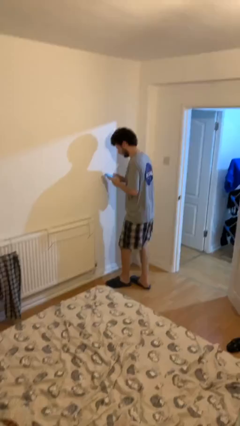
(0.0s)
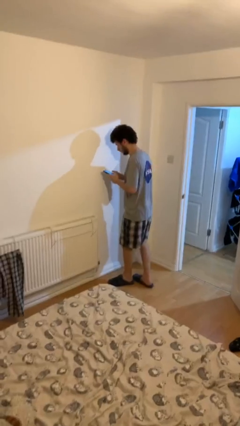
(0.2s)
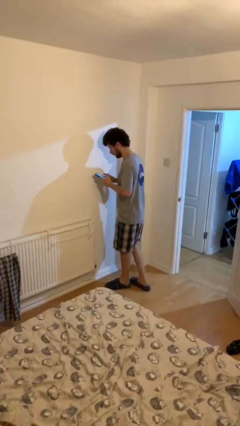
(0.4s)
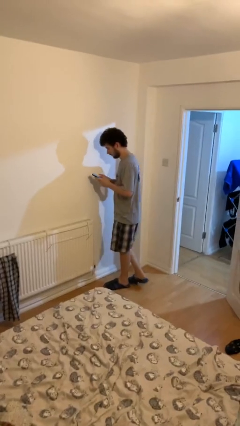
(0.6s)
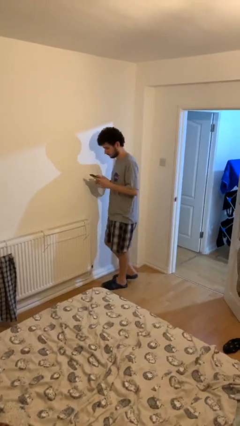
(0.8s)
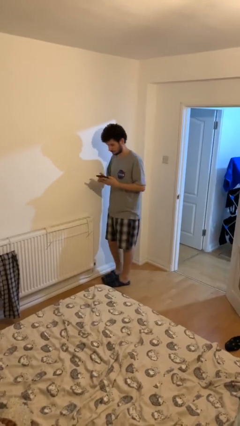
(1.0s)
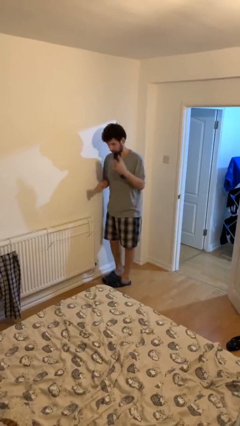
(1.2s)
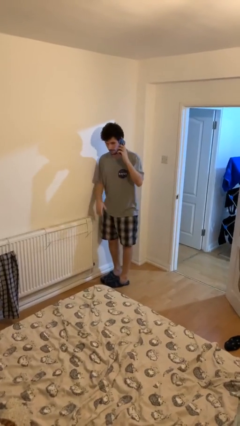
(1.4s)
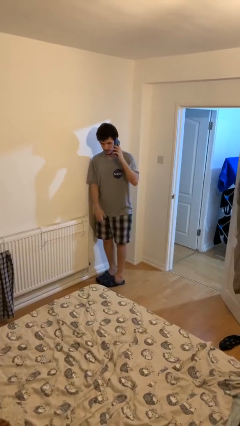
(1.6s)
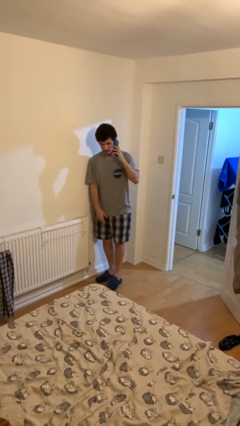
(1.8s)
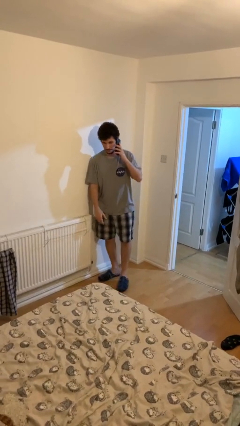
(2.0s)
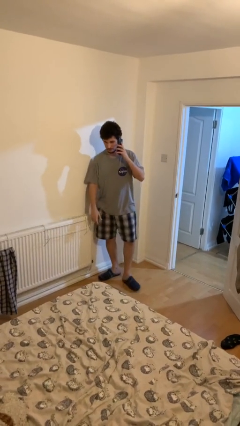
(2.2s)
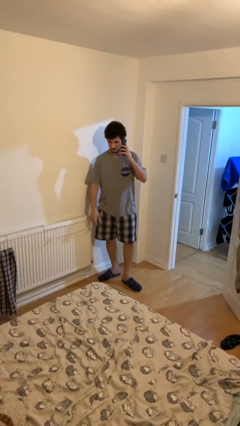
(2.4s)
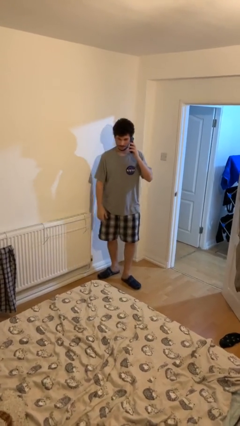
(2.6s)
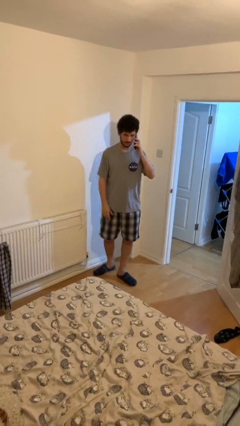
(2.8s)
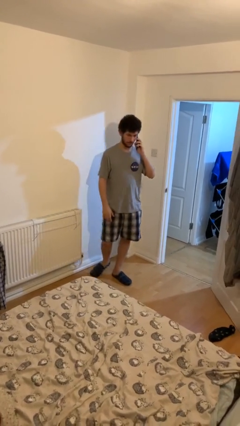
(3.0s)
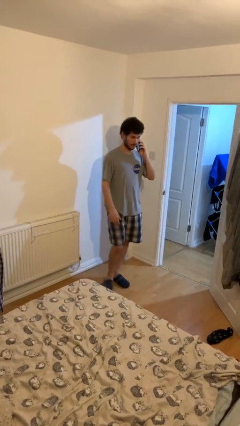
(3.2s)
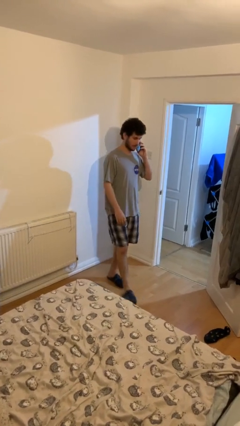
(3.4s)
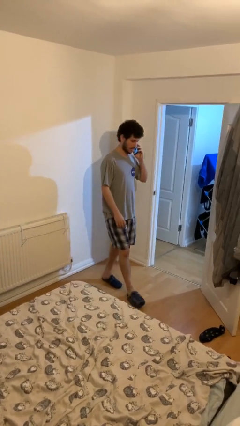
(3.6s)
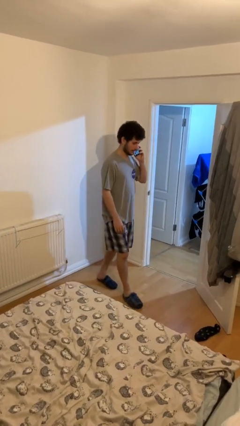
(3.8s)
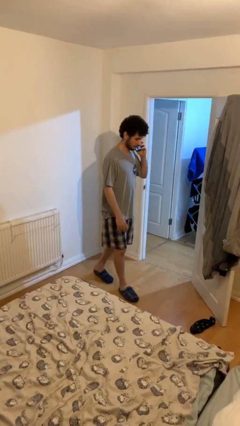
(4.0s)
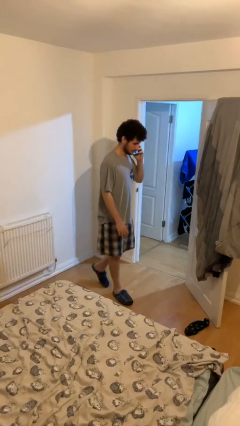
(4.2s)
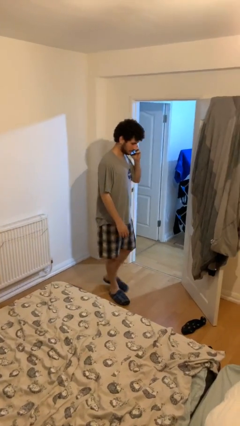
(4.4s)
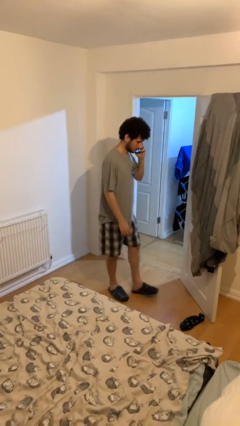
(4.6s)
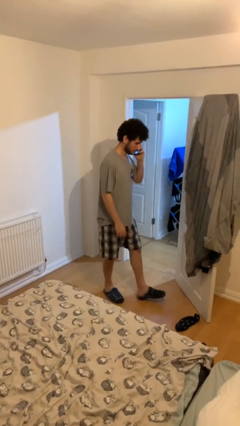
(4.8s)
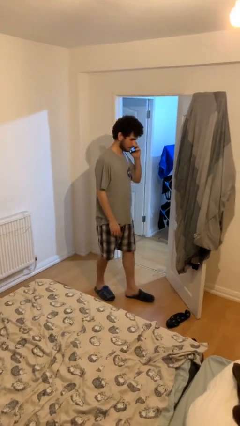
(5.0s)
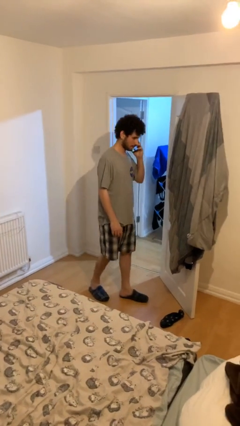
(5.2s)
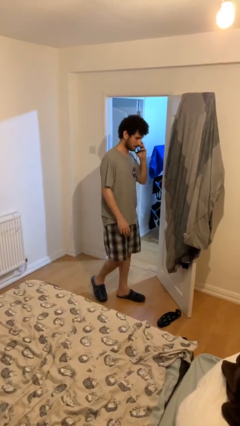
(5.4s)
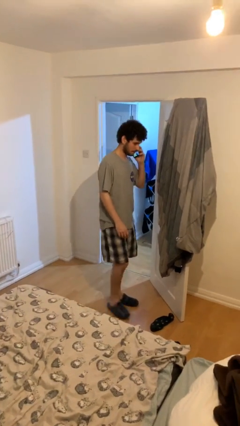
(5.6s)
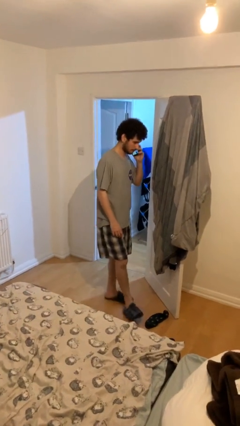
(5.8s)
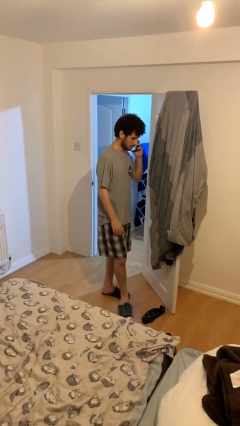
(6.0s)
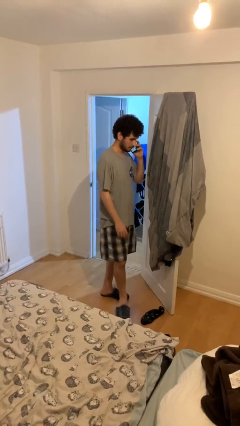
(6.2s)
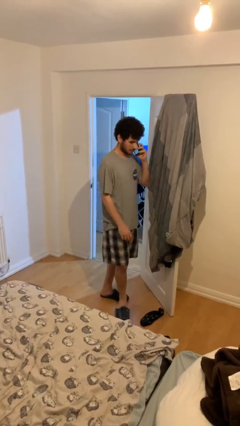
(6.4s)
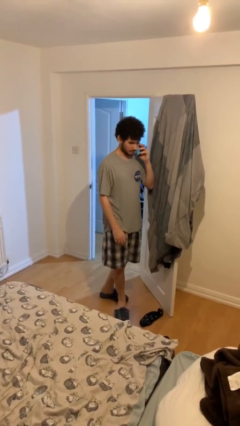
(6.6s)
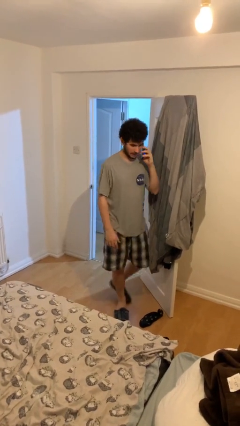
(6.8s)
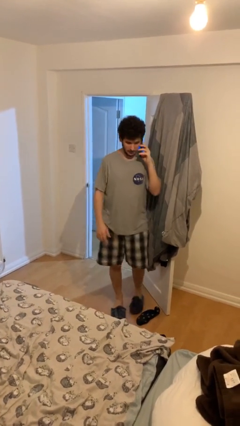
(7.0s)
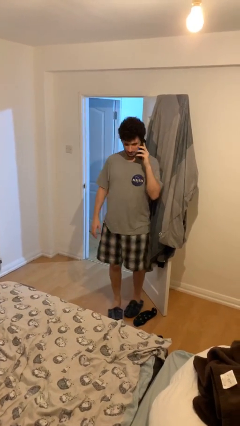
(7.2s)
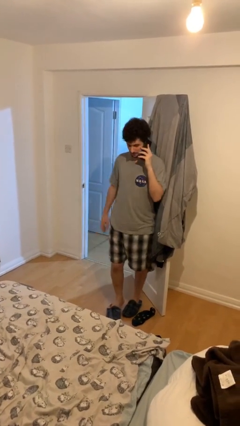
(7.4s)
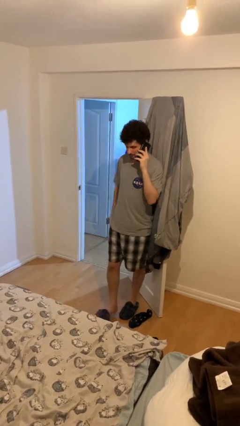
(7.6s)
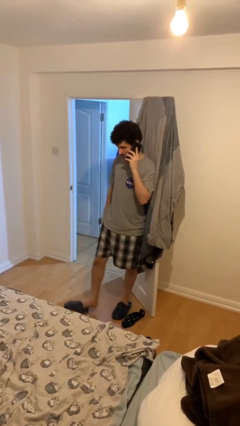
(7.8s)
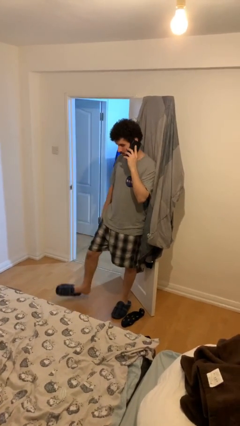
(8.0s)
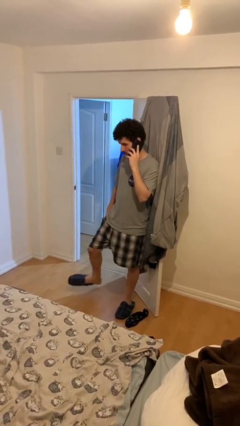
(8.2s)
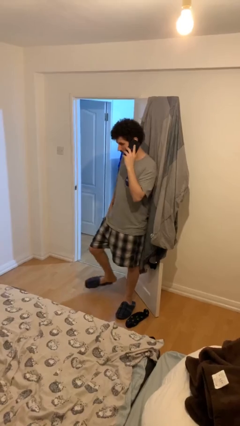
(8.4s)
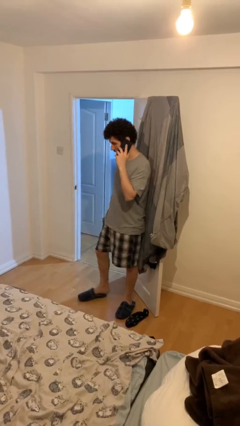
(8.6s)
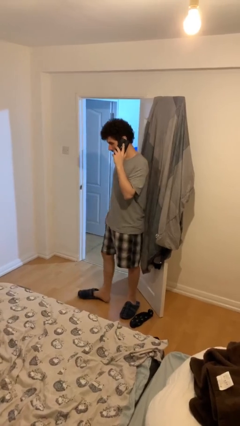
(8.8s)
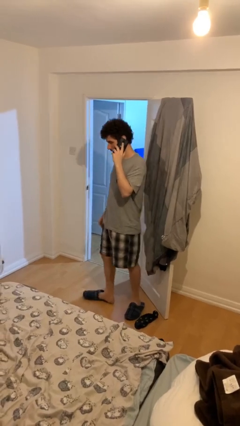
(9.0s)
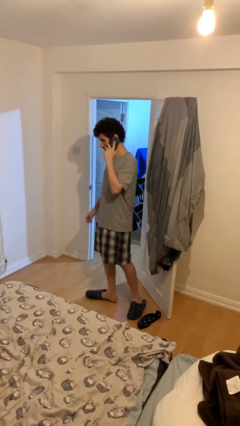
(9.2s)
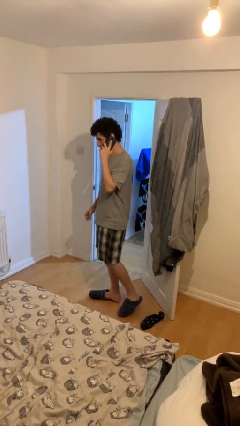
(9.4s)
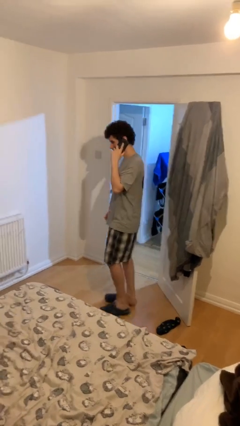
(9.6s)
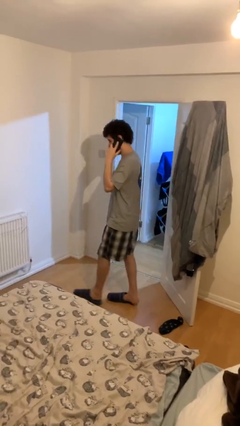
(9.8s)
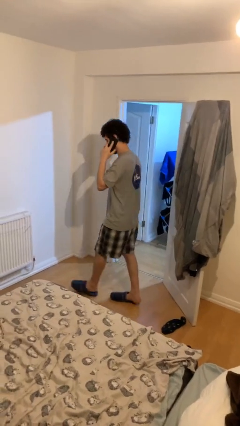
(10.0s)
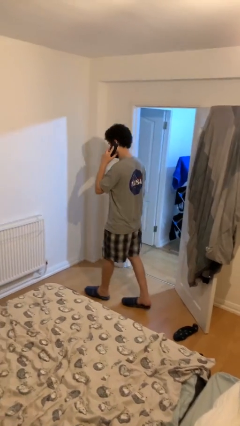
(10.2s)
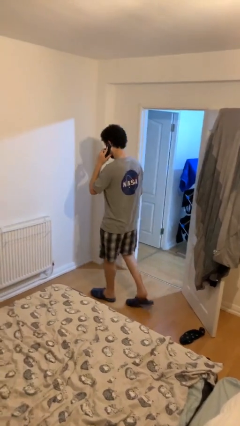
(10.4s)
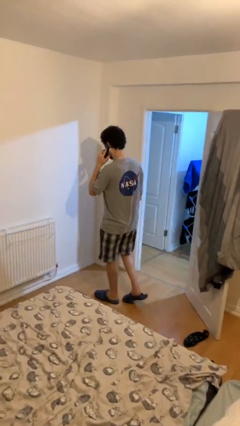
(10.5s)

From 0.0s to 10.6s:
person talks on phone

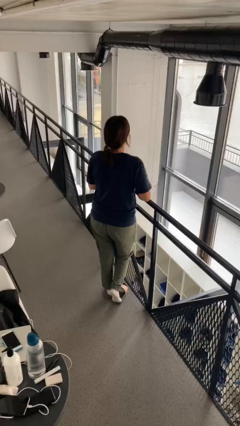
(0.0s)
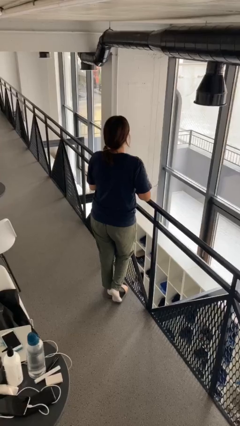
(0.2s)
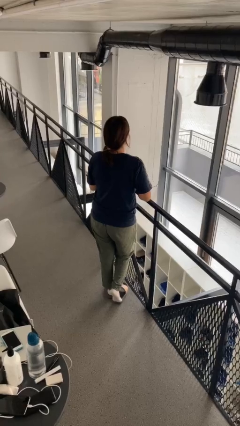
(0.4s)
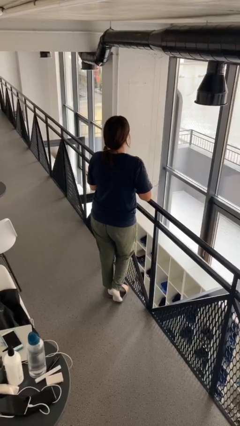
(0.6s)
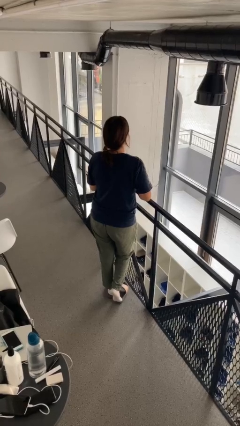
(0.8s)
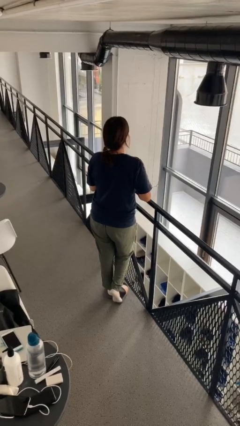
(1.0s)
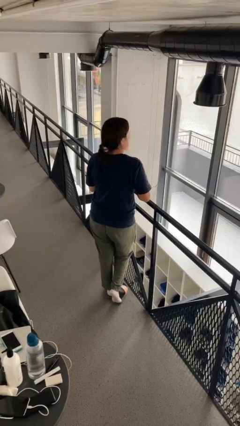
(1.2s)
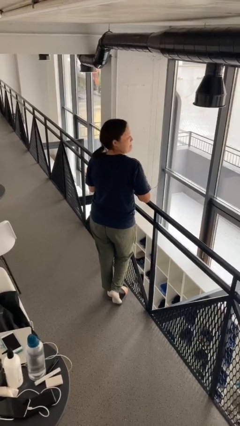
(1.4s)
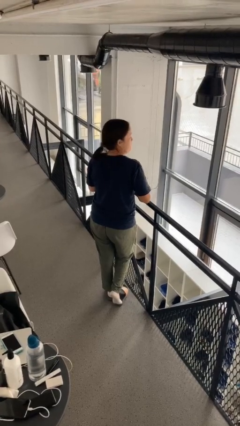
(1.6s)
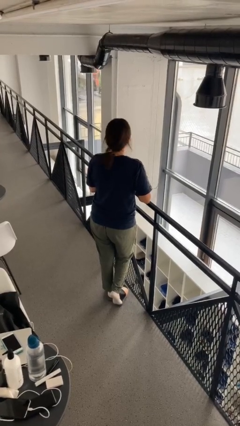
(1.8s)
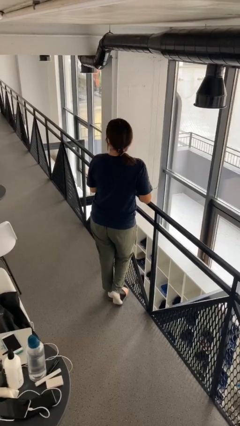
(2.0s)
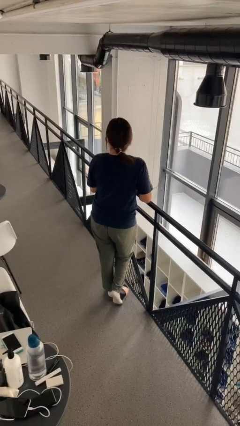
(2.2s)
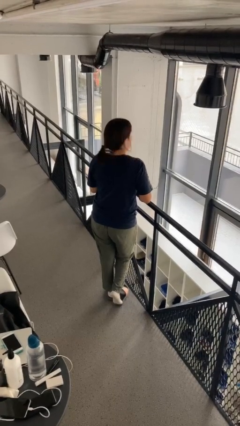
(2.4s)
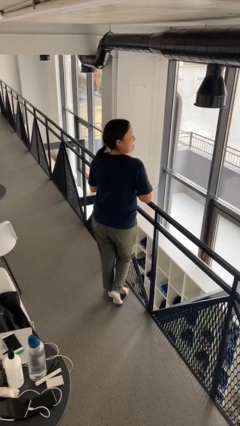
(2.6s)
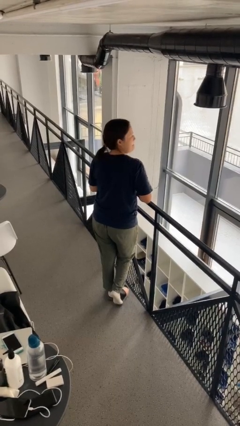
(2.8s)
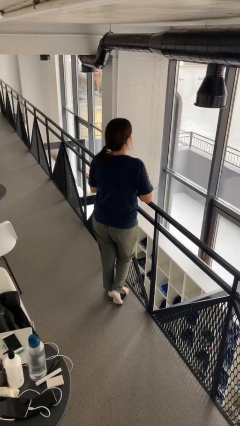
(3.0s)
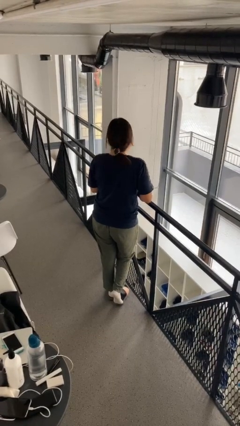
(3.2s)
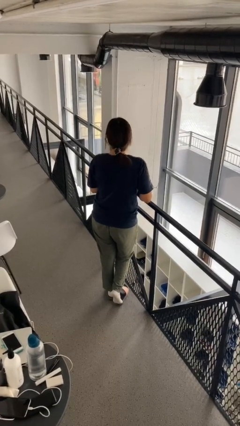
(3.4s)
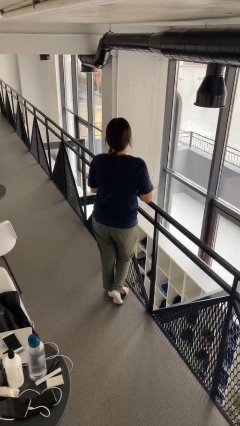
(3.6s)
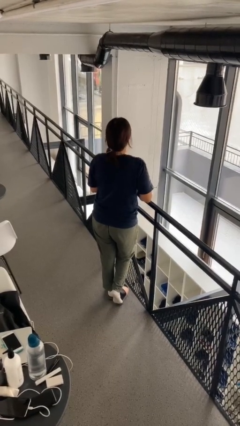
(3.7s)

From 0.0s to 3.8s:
person shakes head

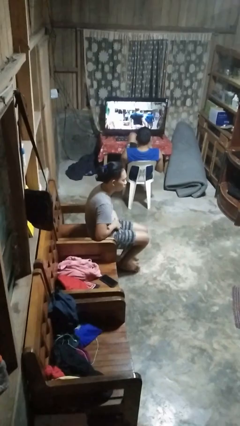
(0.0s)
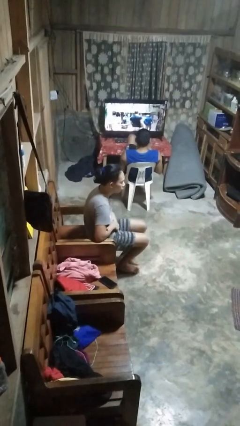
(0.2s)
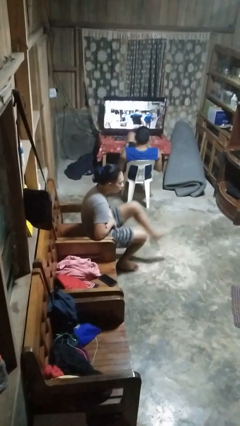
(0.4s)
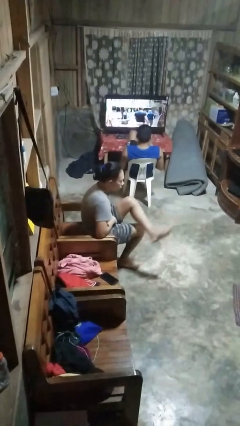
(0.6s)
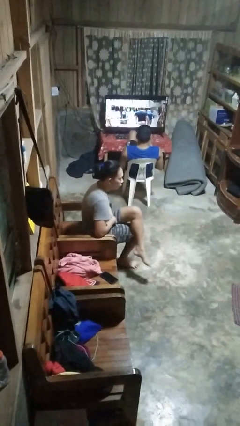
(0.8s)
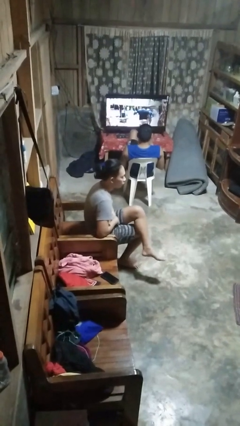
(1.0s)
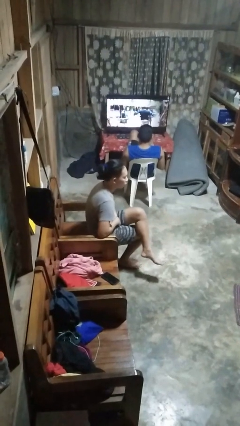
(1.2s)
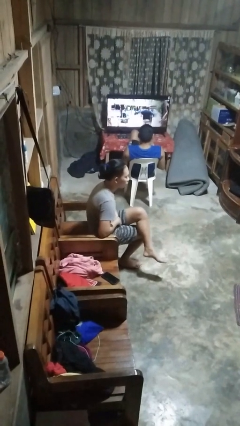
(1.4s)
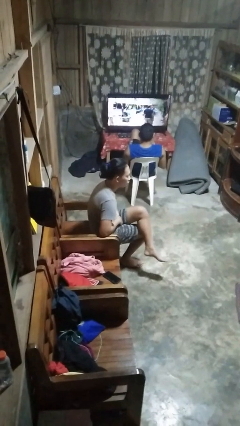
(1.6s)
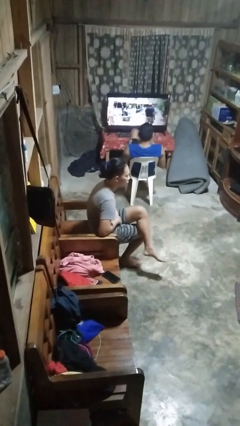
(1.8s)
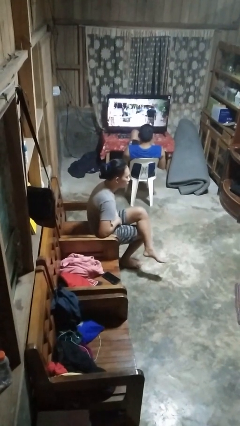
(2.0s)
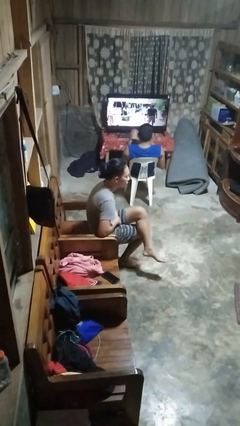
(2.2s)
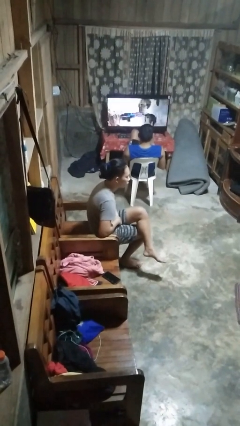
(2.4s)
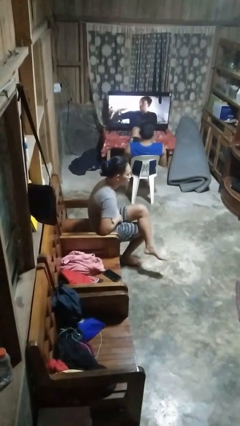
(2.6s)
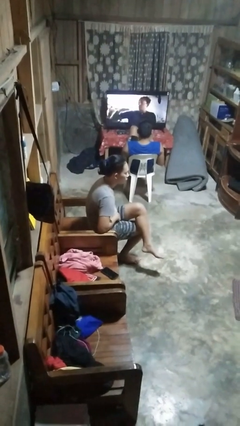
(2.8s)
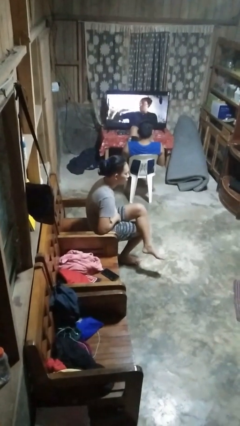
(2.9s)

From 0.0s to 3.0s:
person crosses legs
